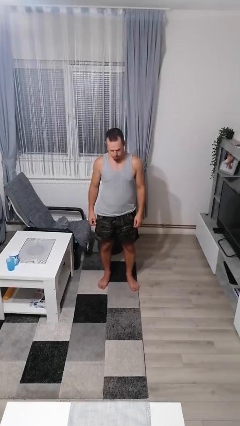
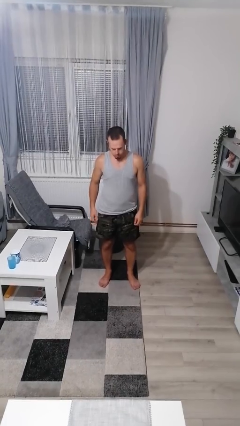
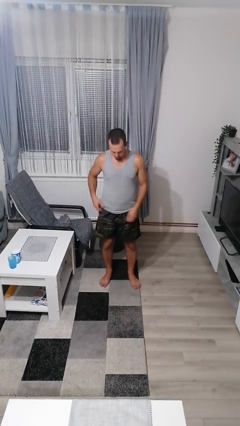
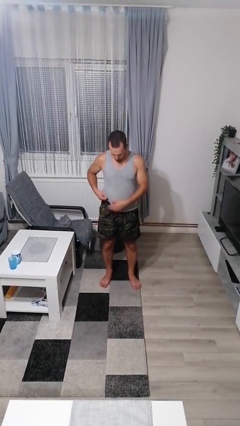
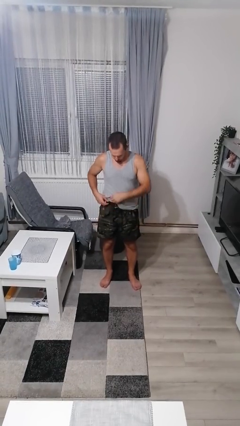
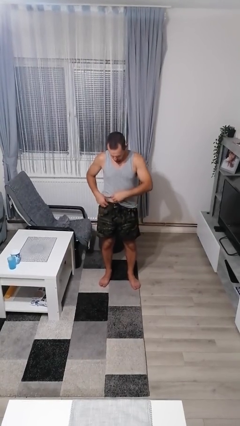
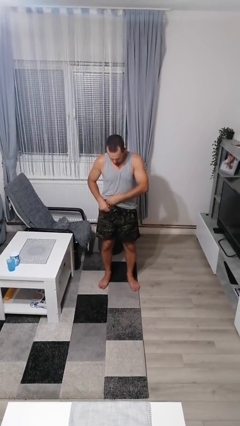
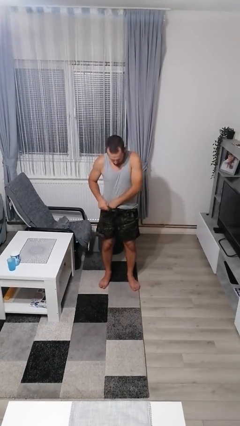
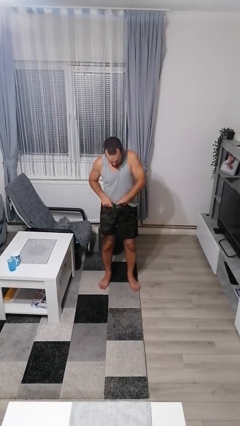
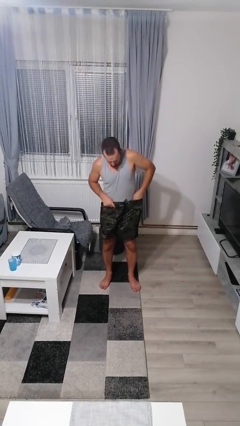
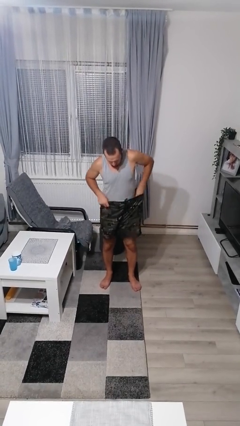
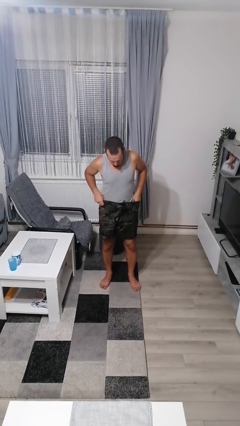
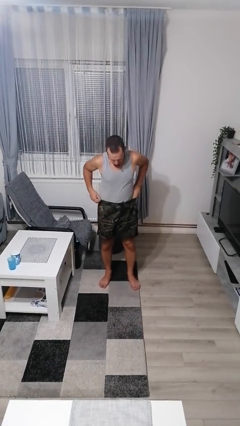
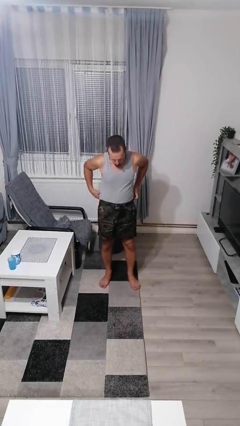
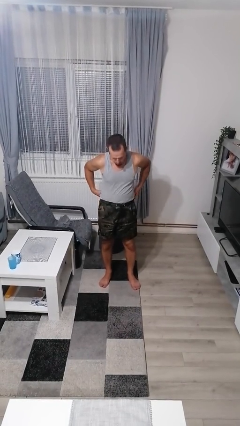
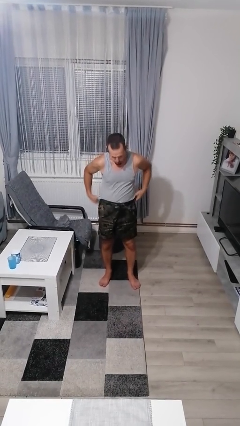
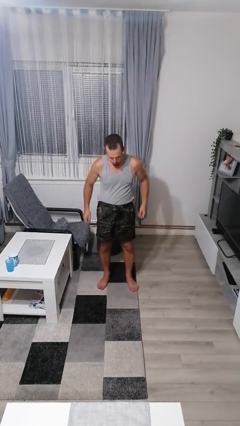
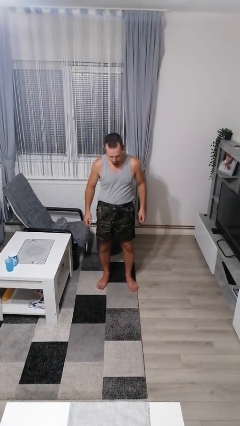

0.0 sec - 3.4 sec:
person tucks in shirt

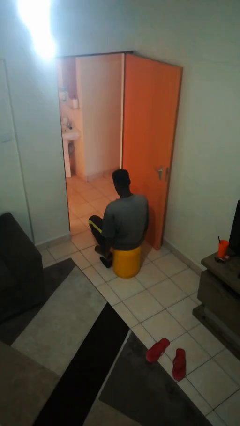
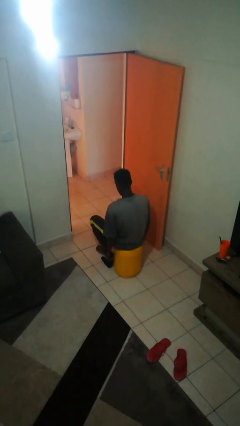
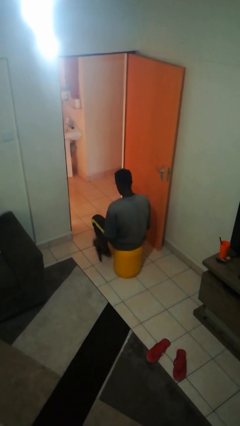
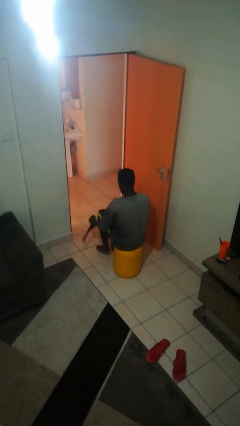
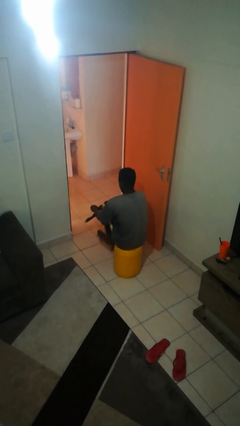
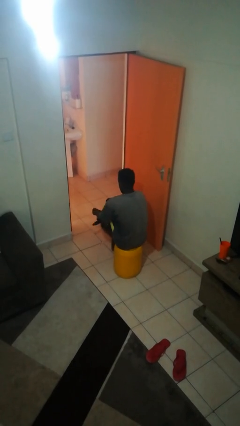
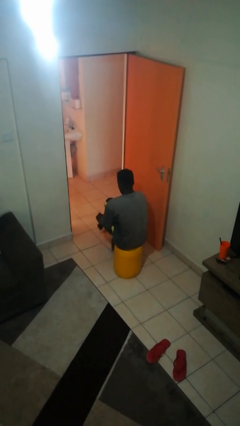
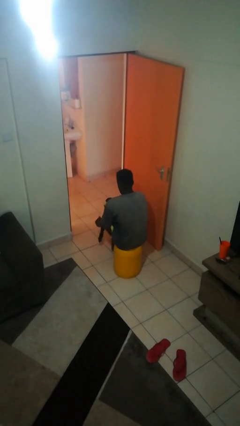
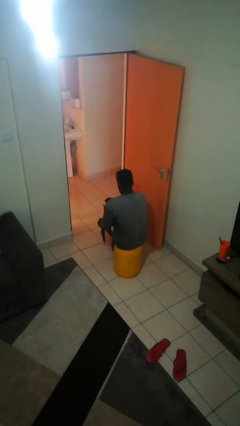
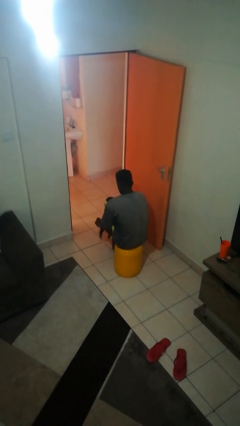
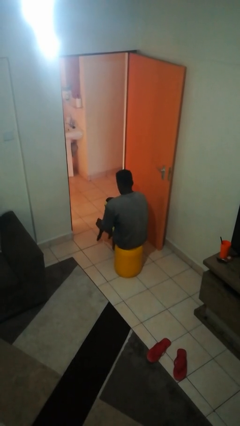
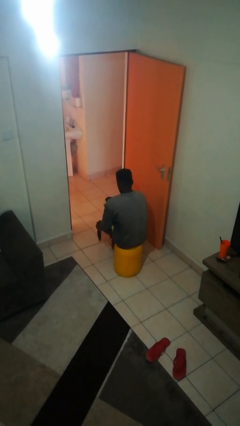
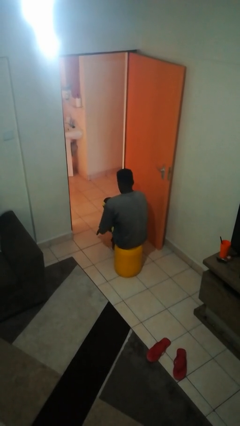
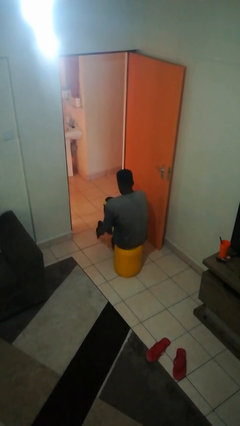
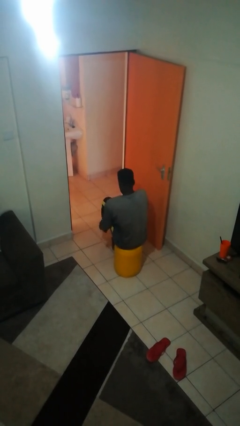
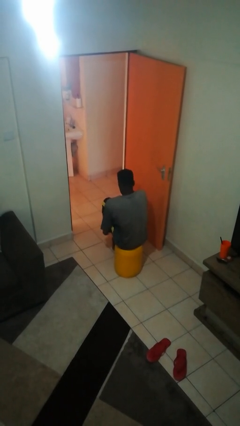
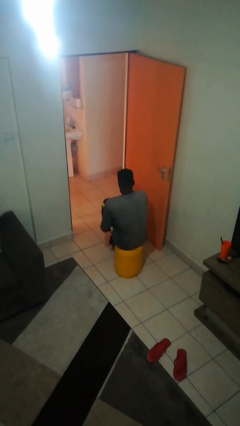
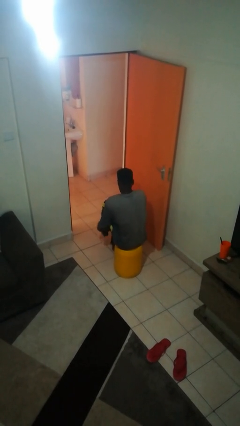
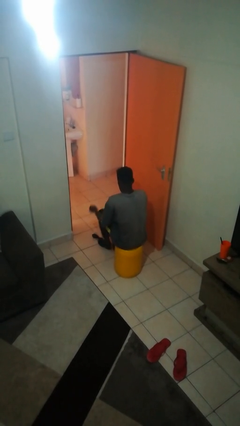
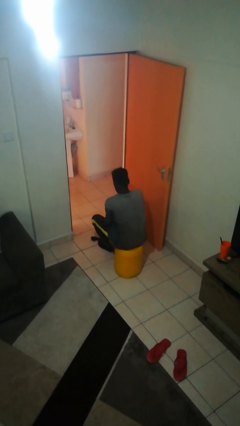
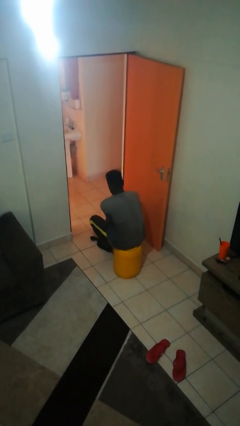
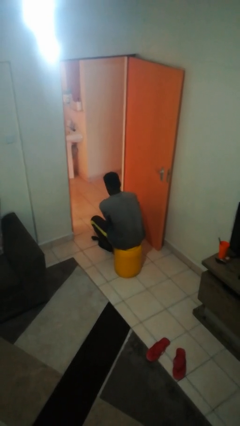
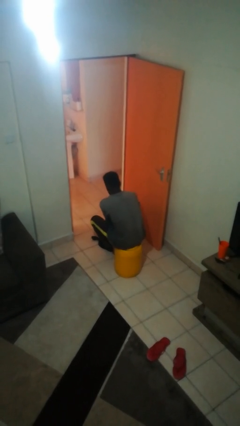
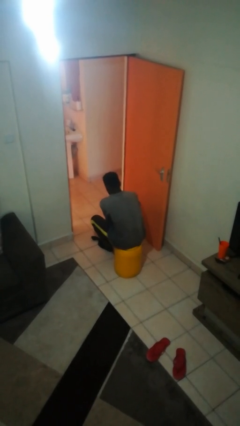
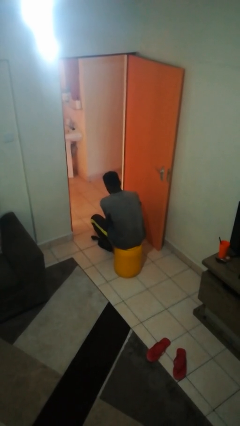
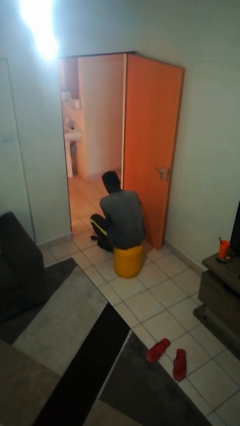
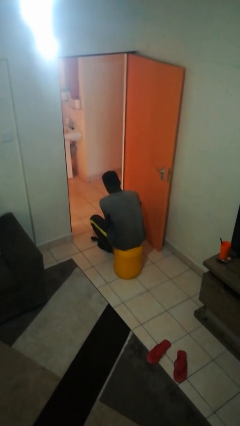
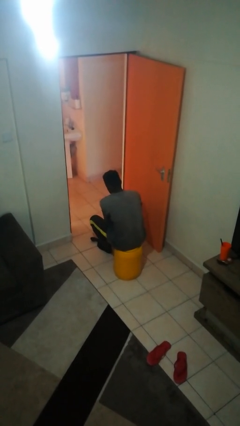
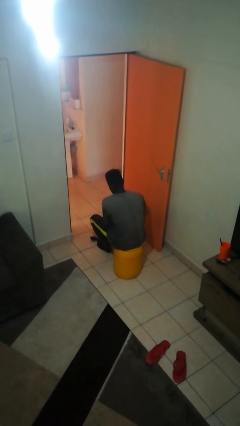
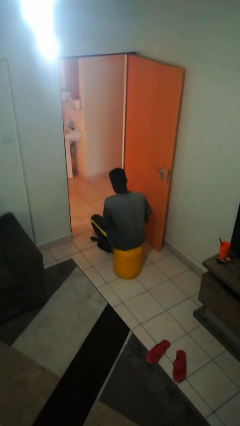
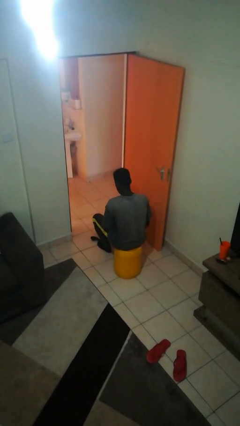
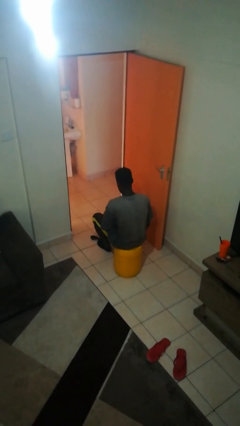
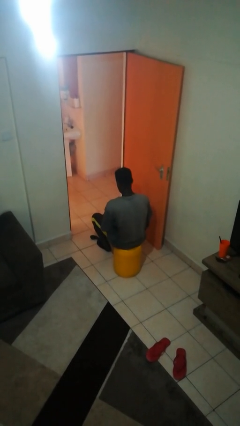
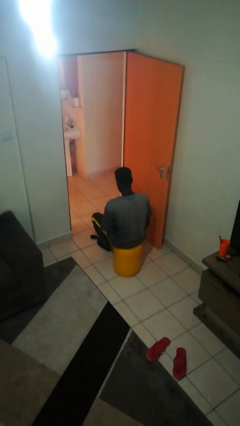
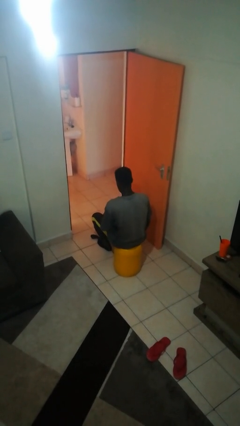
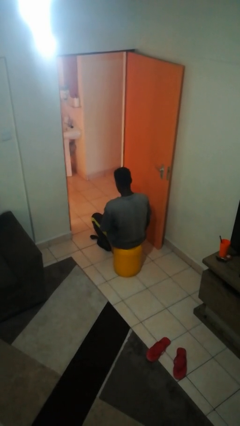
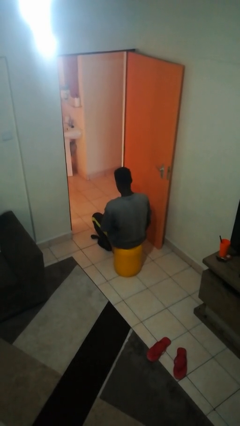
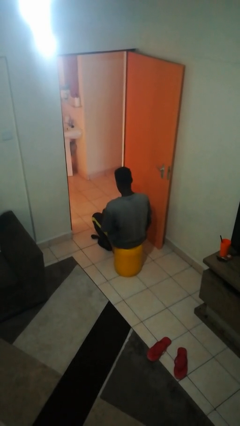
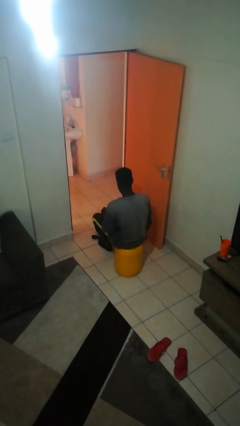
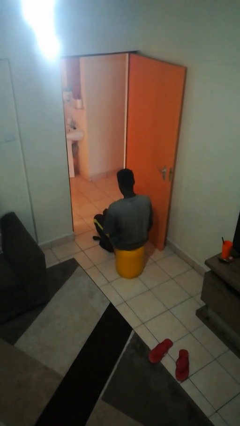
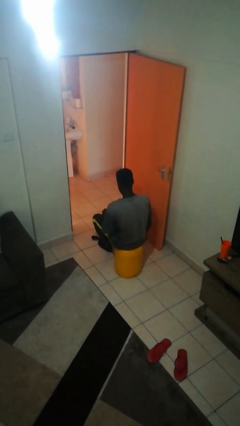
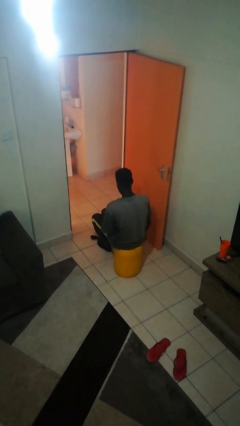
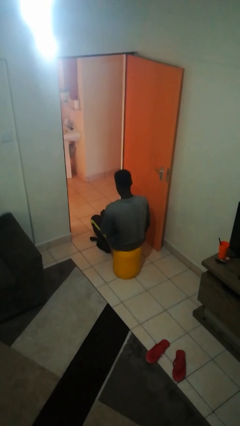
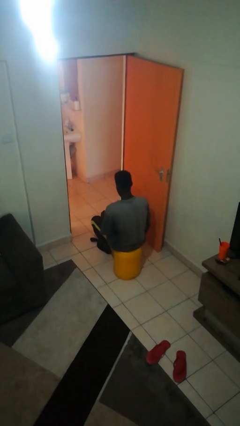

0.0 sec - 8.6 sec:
person puts on socks

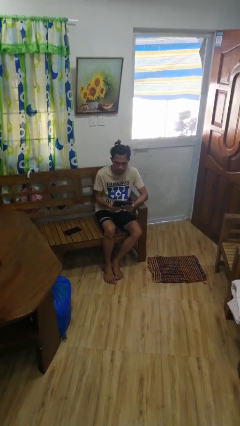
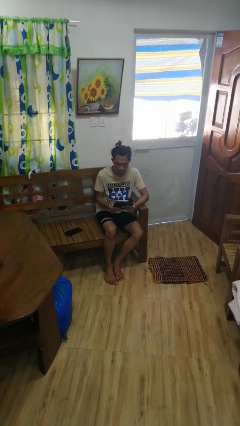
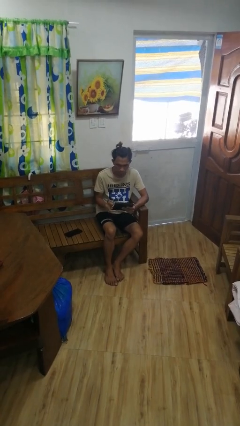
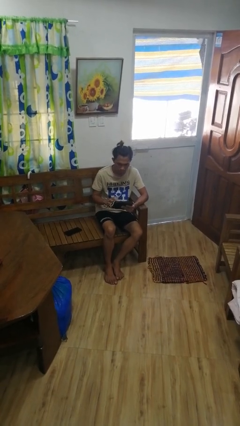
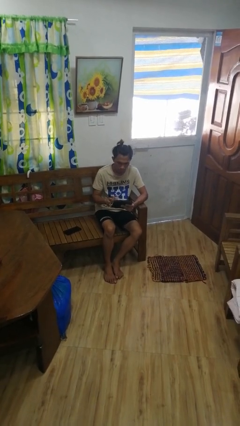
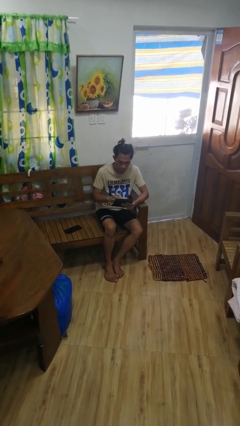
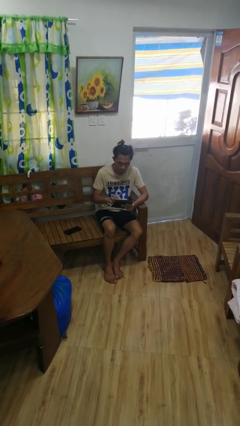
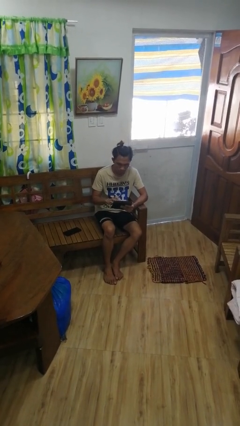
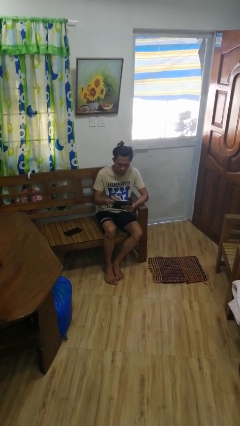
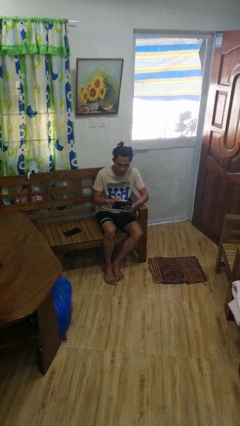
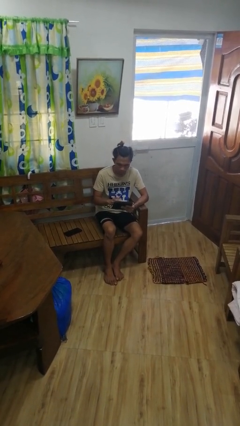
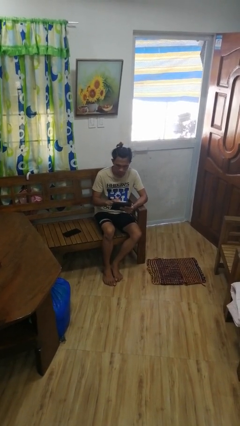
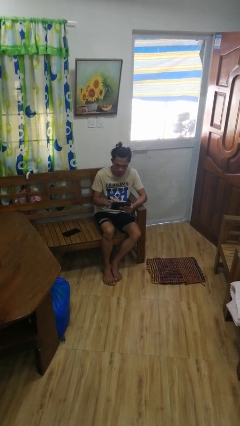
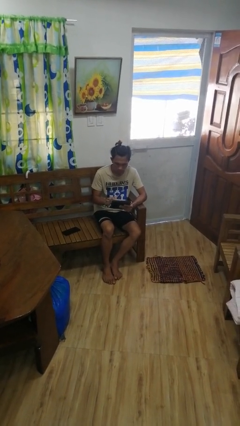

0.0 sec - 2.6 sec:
person interacts with tablet

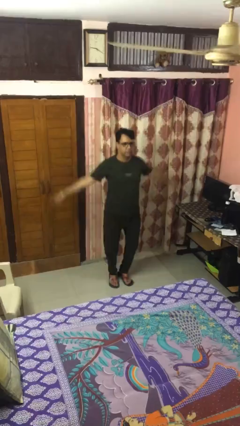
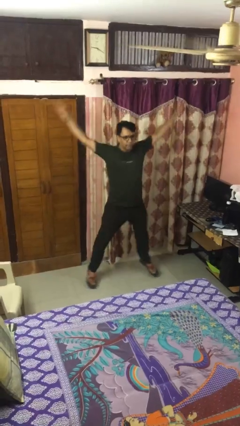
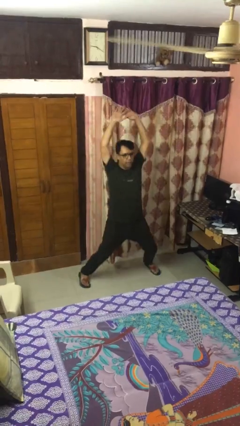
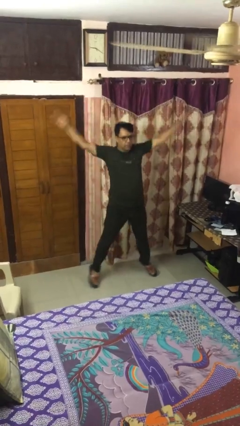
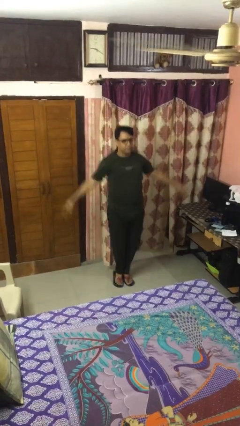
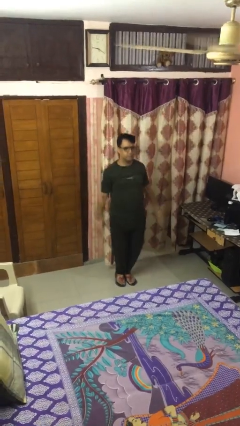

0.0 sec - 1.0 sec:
person exercises with jumping jacks

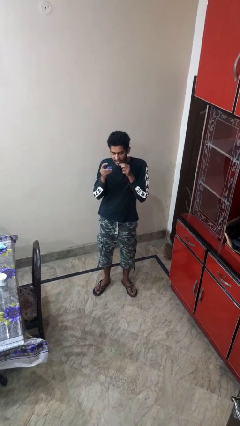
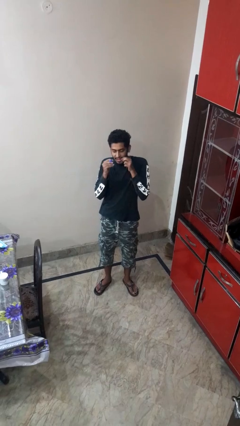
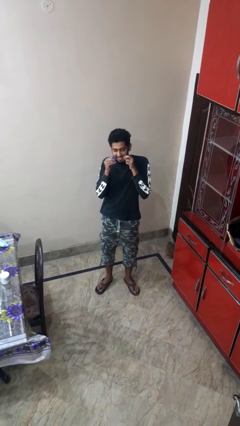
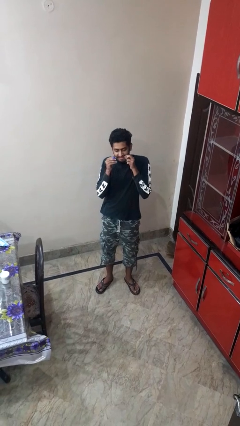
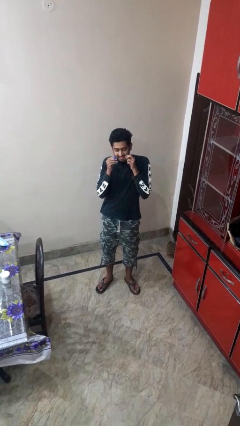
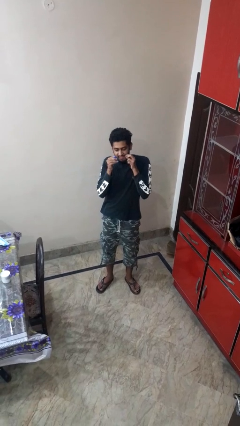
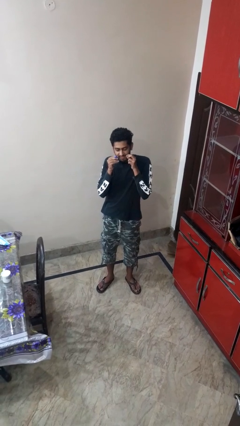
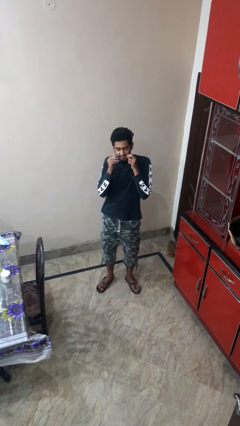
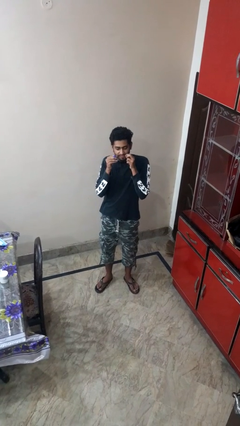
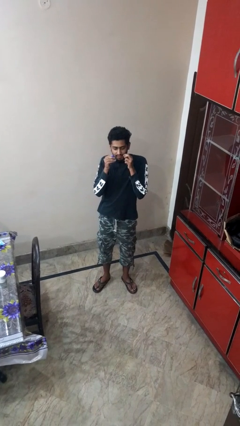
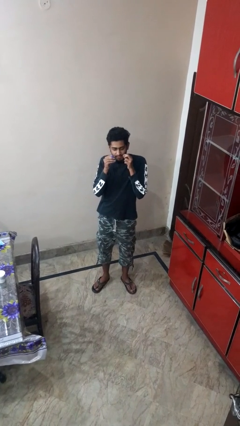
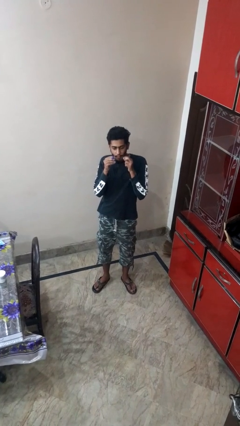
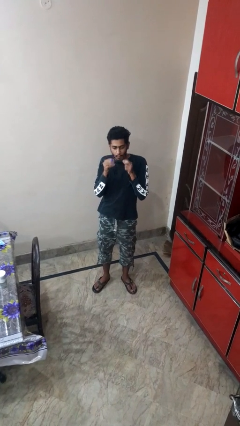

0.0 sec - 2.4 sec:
person flosses
